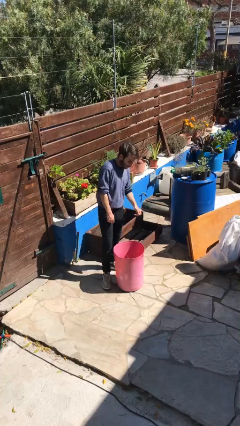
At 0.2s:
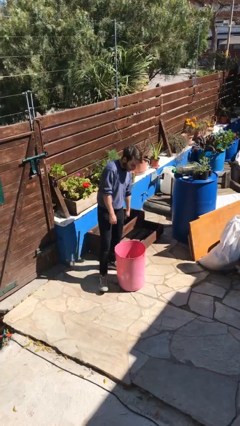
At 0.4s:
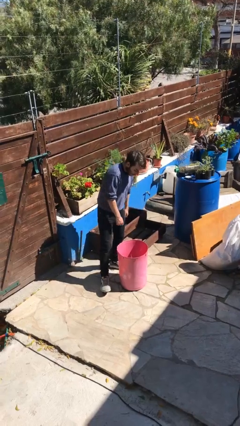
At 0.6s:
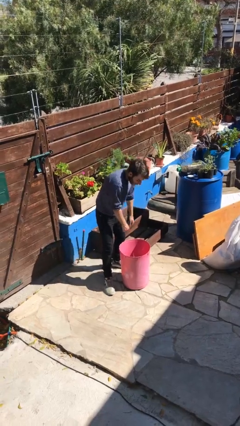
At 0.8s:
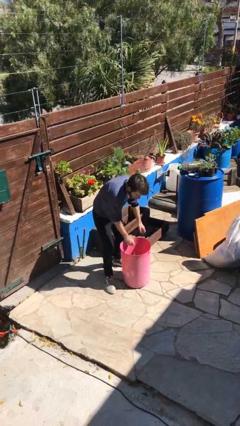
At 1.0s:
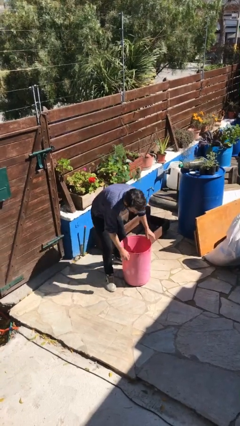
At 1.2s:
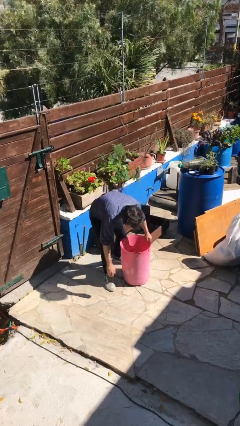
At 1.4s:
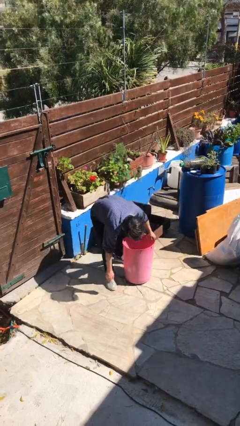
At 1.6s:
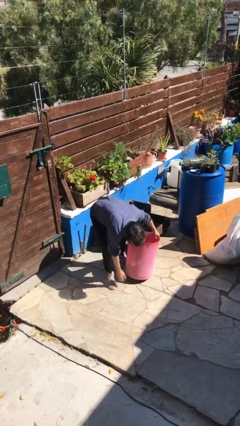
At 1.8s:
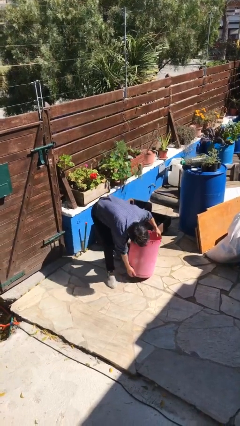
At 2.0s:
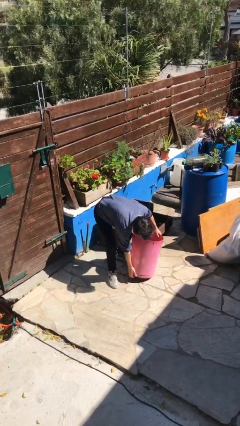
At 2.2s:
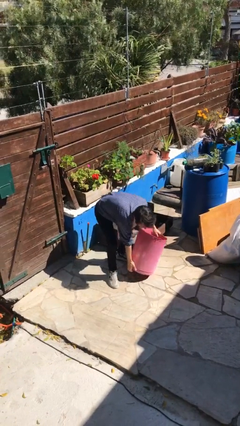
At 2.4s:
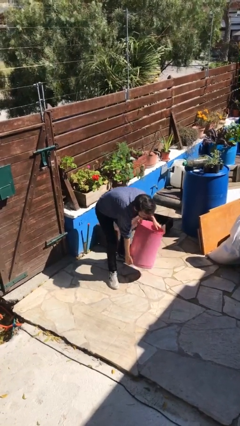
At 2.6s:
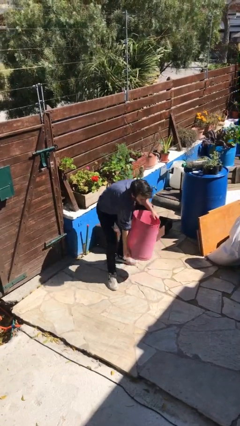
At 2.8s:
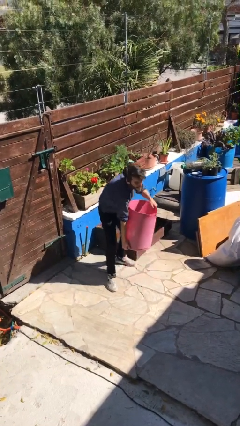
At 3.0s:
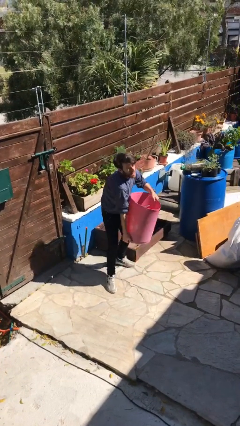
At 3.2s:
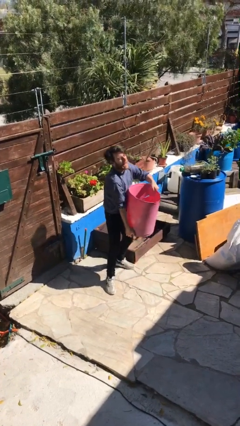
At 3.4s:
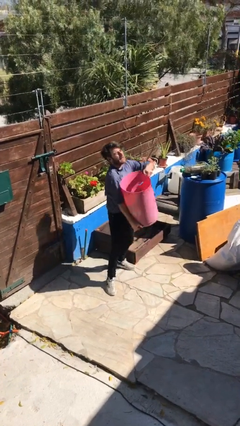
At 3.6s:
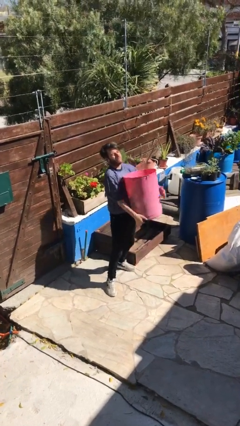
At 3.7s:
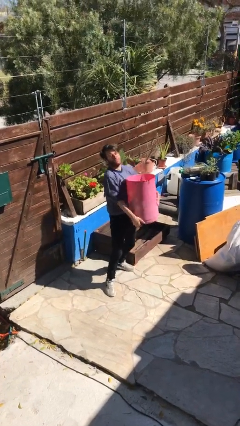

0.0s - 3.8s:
person picks up object from floor

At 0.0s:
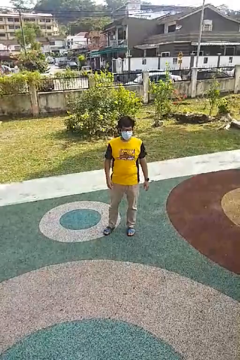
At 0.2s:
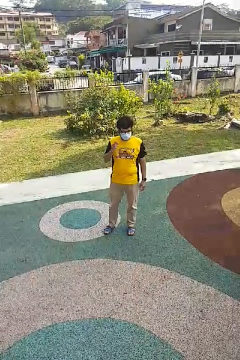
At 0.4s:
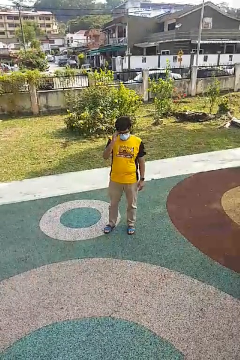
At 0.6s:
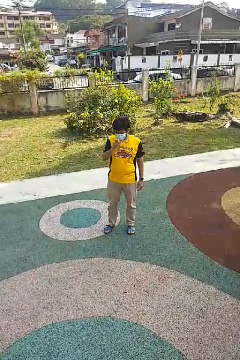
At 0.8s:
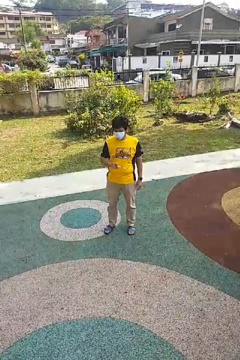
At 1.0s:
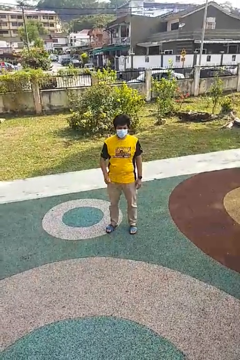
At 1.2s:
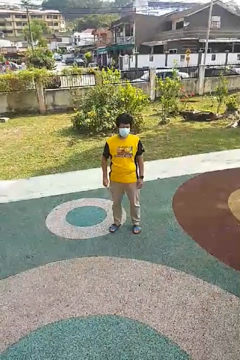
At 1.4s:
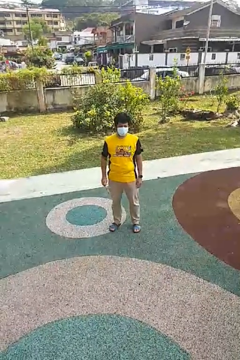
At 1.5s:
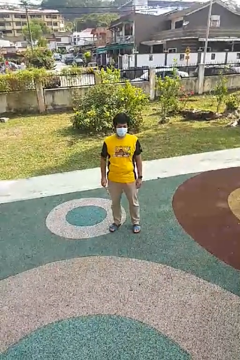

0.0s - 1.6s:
person takes off glasses

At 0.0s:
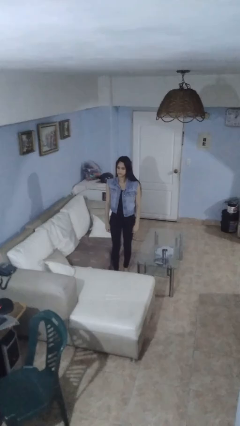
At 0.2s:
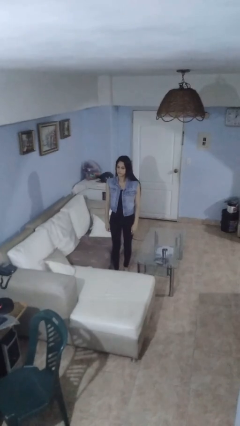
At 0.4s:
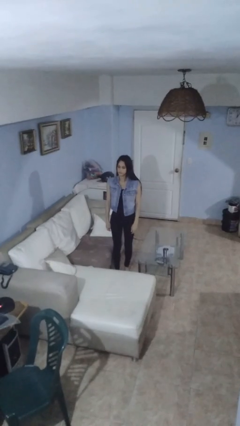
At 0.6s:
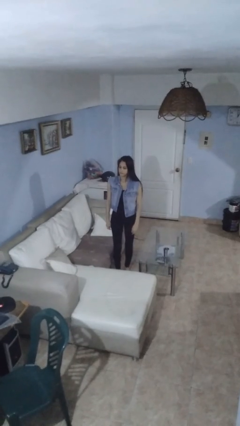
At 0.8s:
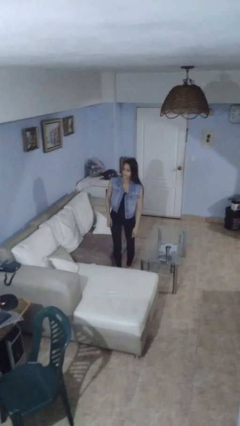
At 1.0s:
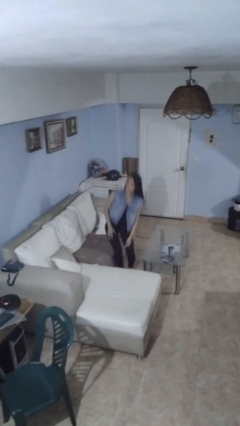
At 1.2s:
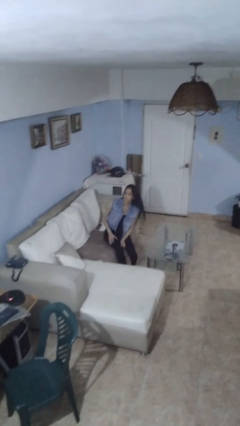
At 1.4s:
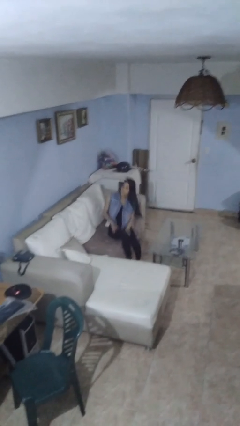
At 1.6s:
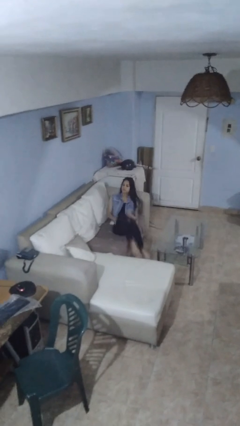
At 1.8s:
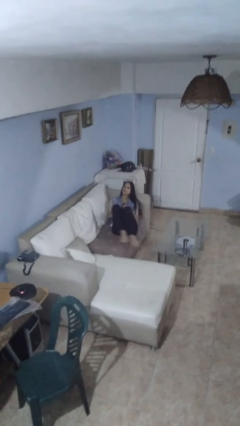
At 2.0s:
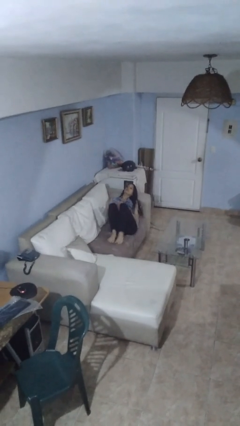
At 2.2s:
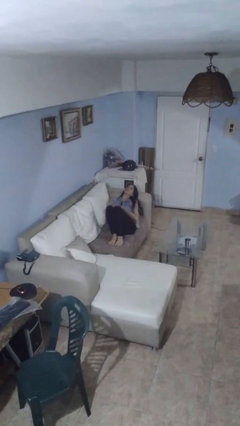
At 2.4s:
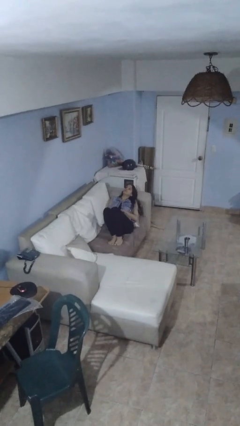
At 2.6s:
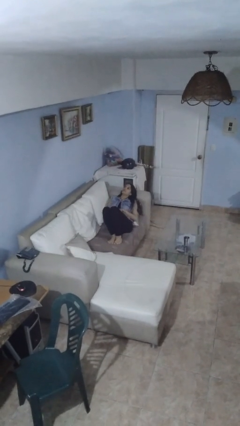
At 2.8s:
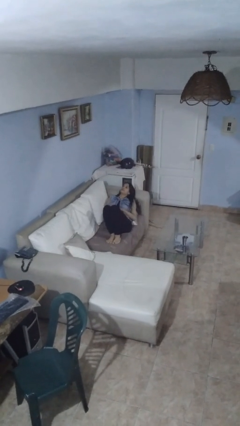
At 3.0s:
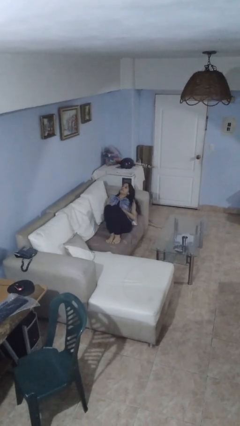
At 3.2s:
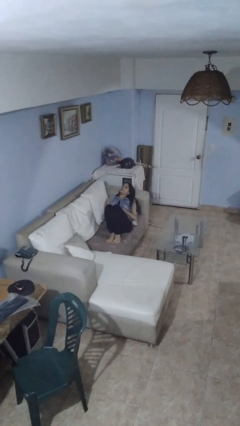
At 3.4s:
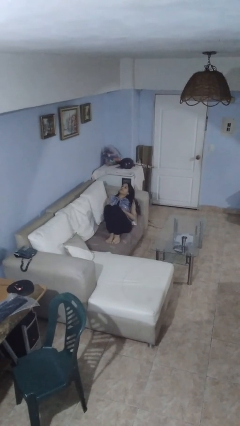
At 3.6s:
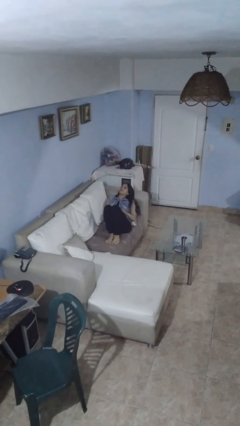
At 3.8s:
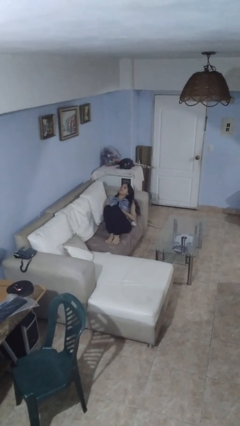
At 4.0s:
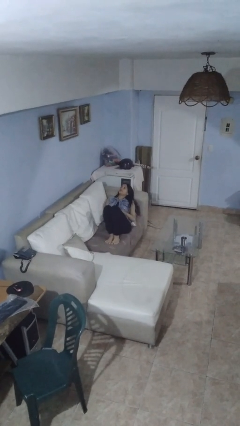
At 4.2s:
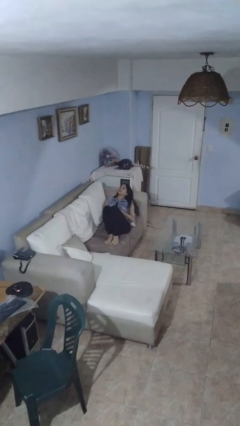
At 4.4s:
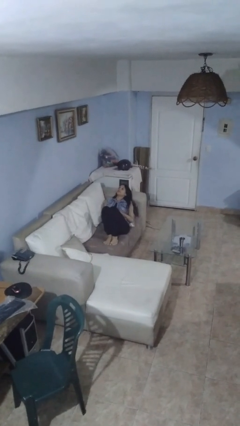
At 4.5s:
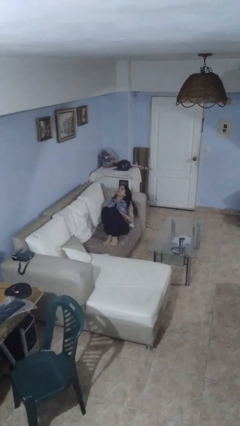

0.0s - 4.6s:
person lies down on couch

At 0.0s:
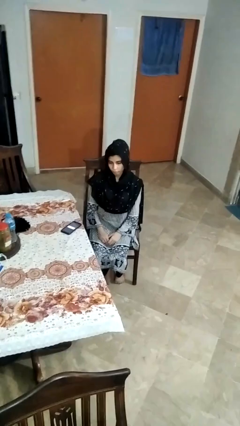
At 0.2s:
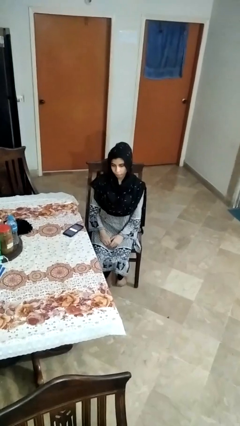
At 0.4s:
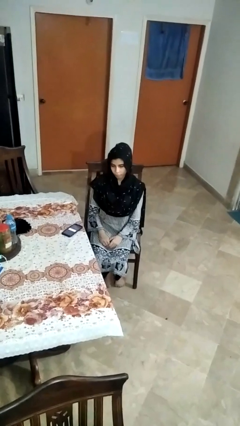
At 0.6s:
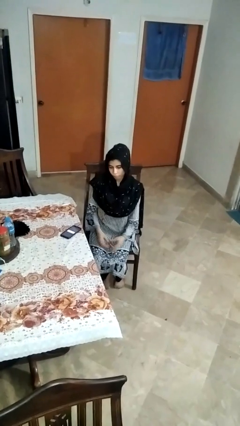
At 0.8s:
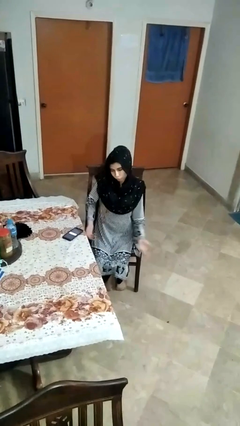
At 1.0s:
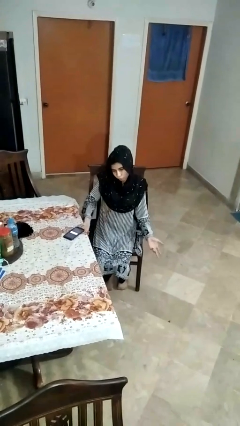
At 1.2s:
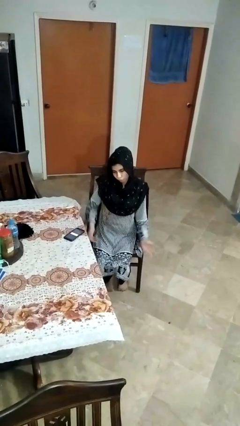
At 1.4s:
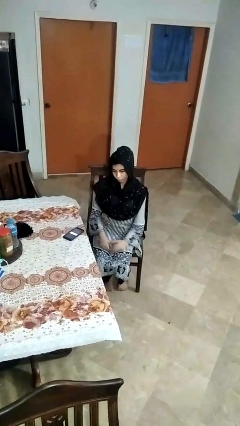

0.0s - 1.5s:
person shrugs

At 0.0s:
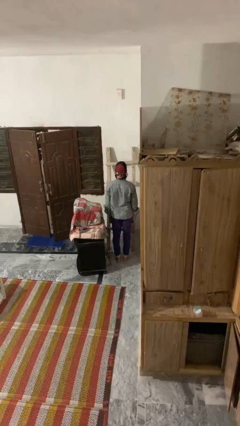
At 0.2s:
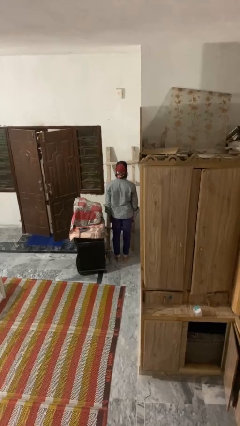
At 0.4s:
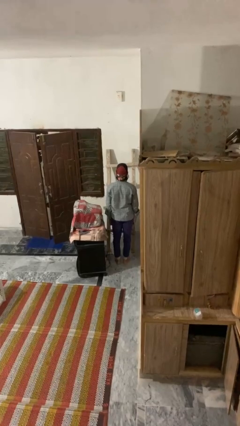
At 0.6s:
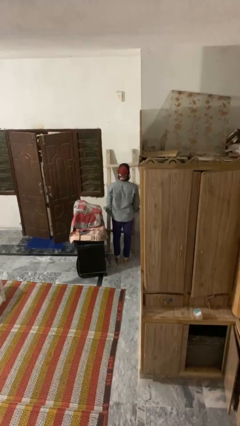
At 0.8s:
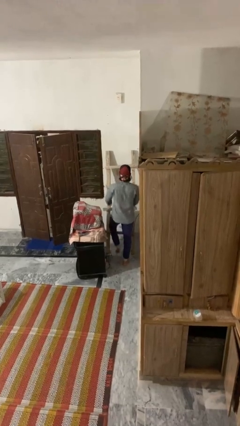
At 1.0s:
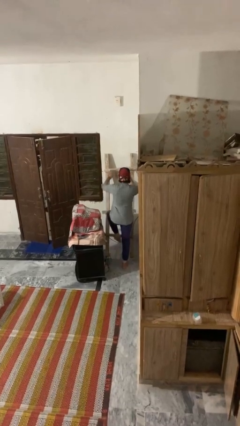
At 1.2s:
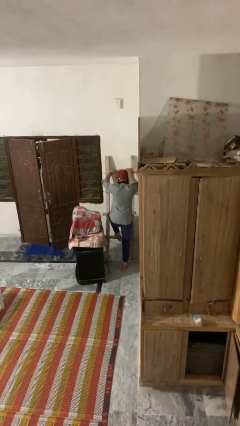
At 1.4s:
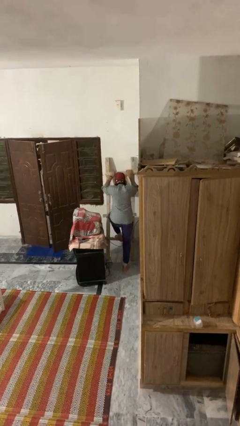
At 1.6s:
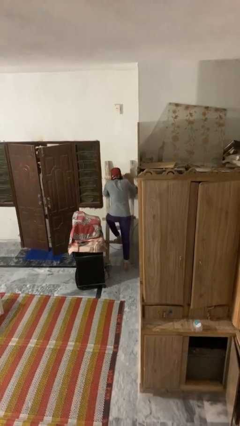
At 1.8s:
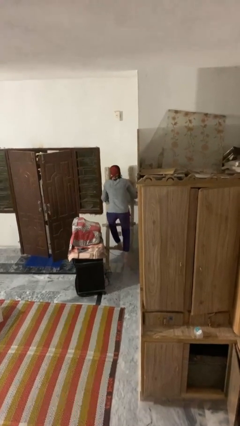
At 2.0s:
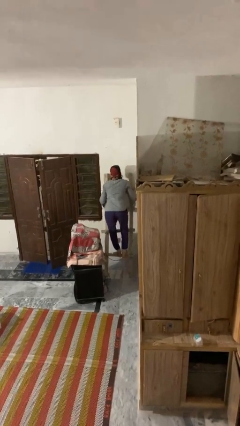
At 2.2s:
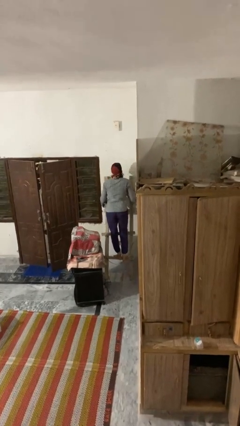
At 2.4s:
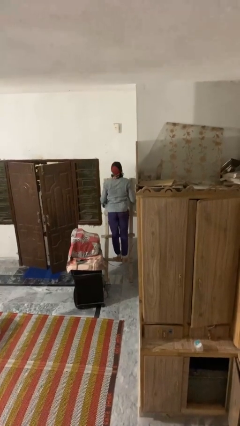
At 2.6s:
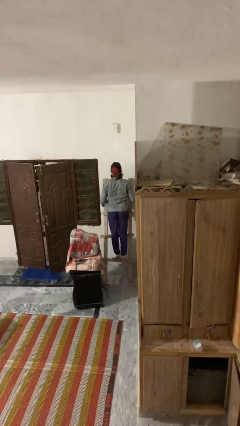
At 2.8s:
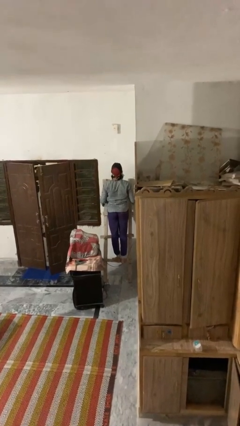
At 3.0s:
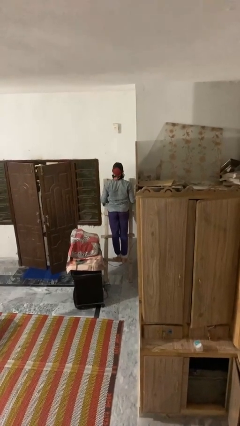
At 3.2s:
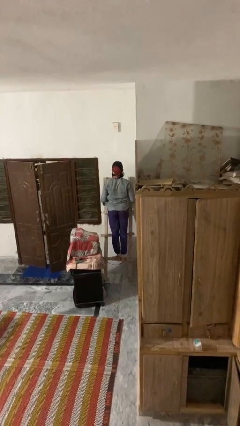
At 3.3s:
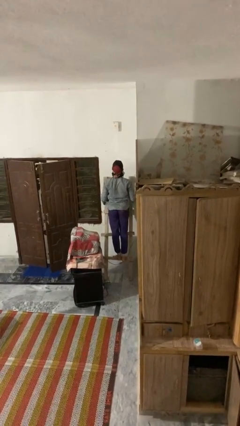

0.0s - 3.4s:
person climbs up ladder

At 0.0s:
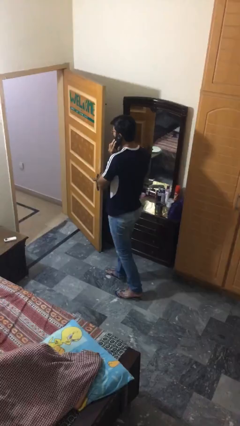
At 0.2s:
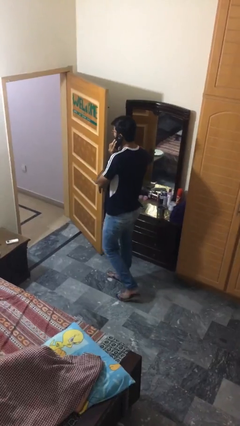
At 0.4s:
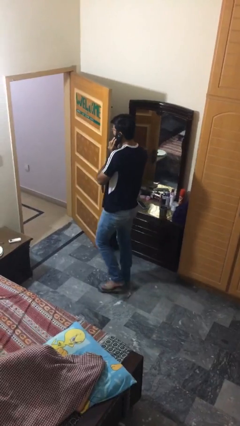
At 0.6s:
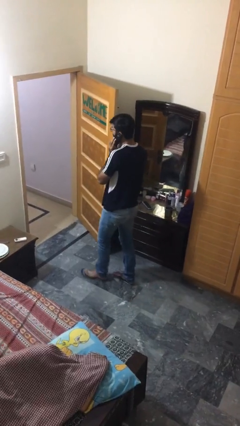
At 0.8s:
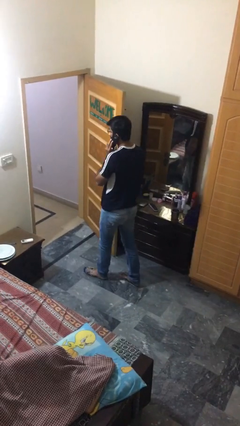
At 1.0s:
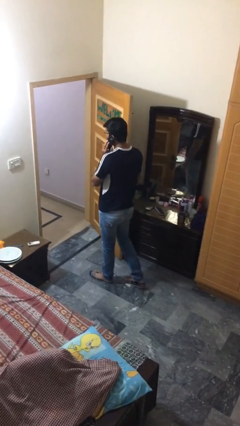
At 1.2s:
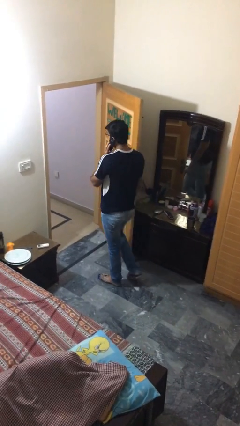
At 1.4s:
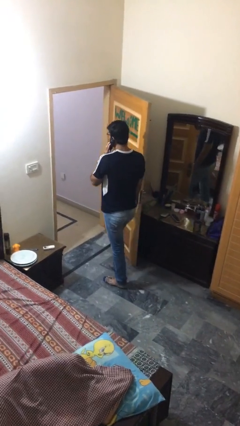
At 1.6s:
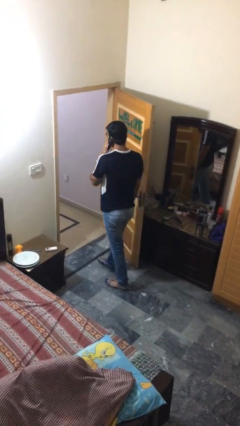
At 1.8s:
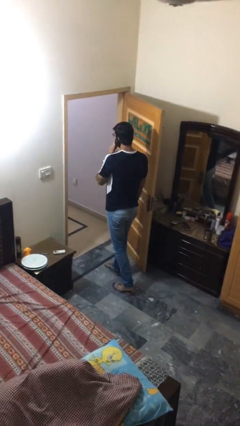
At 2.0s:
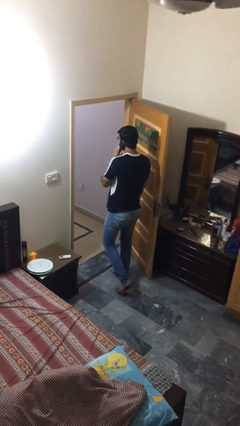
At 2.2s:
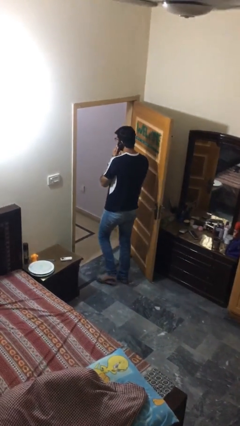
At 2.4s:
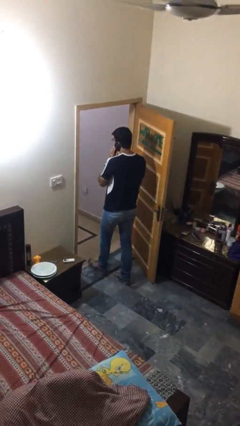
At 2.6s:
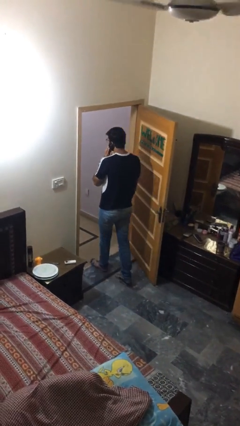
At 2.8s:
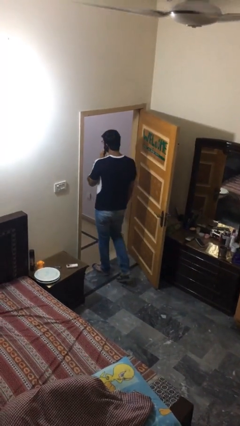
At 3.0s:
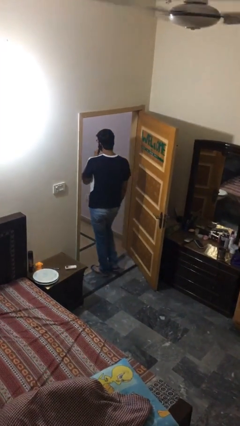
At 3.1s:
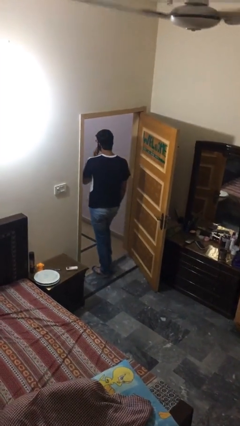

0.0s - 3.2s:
person exits scene through structure
